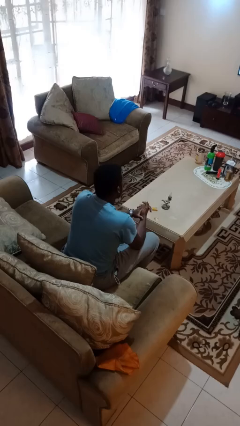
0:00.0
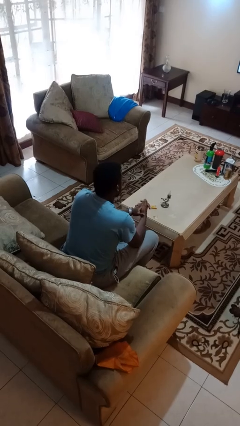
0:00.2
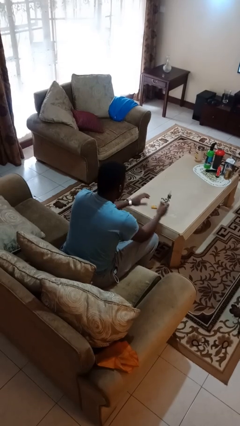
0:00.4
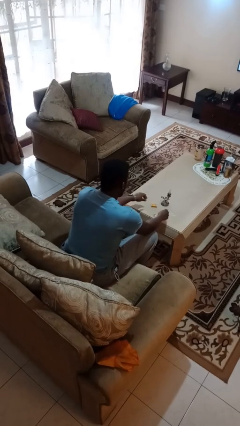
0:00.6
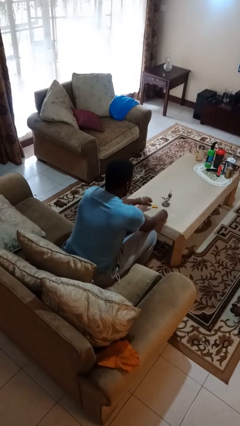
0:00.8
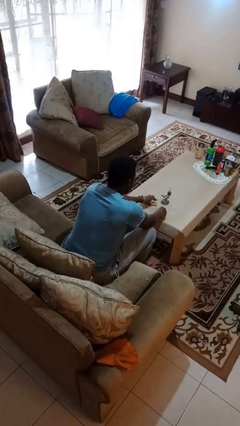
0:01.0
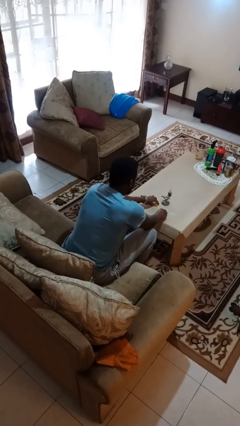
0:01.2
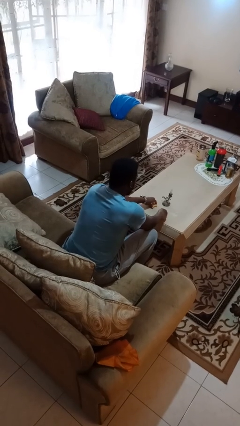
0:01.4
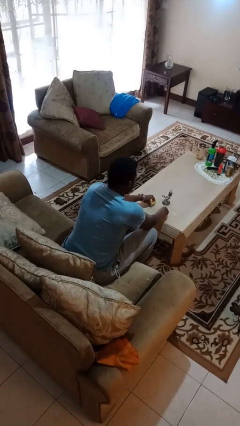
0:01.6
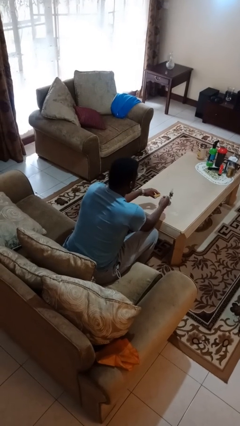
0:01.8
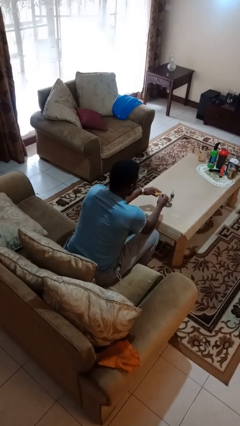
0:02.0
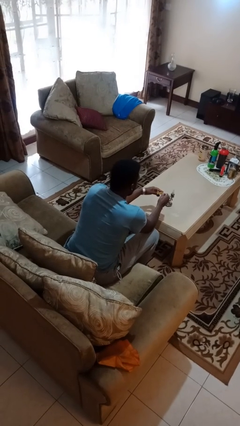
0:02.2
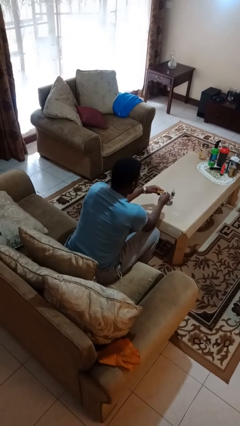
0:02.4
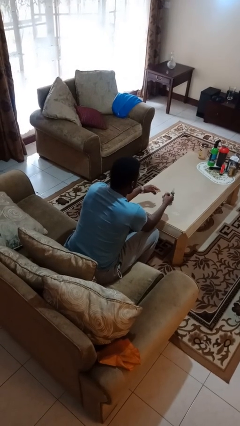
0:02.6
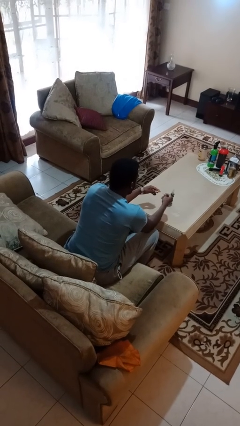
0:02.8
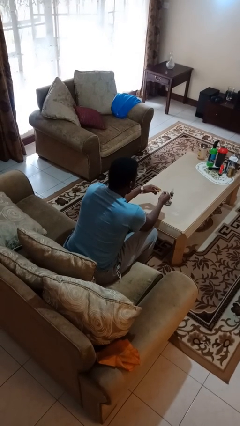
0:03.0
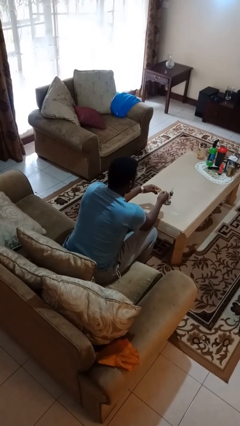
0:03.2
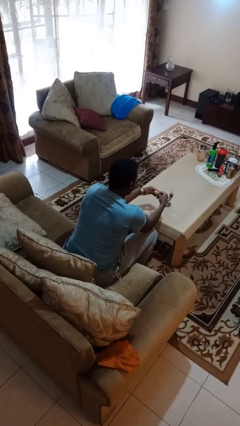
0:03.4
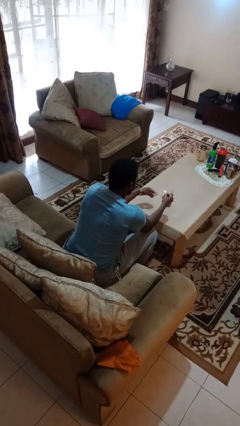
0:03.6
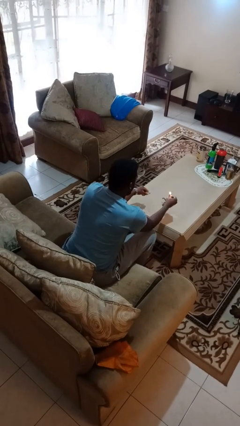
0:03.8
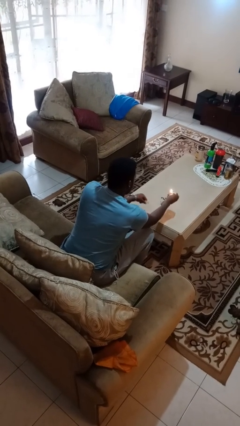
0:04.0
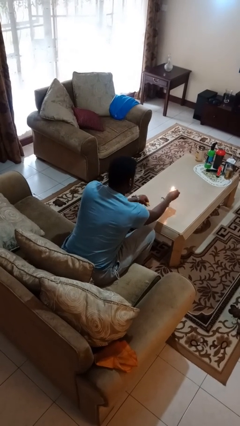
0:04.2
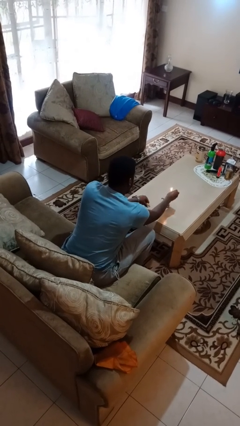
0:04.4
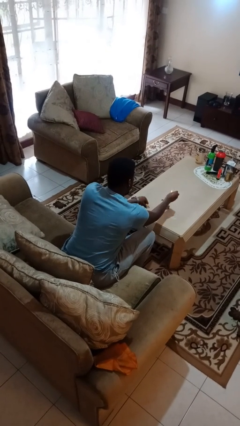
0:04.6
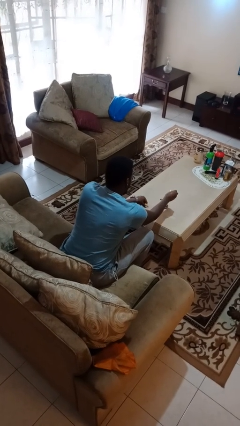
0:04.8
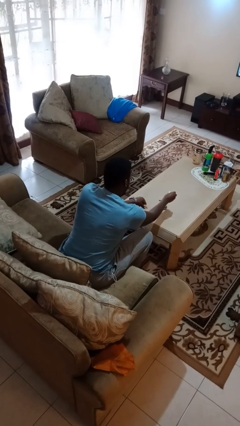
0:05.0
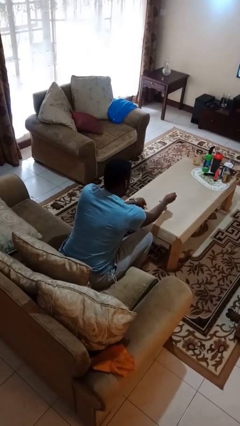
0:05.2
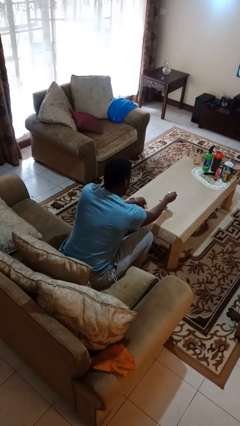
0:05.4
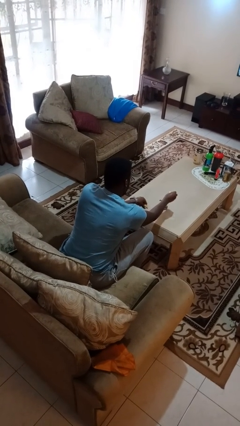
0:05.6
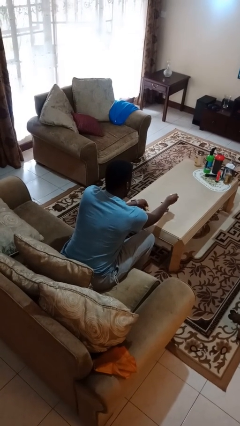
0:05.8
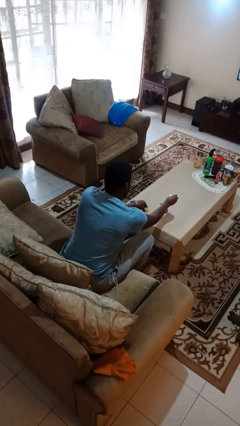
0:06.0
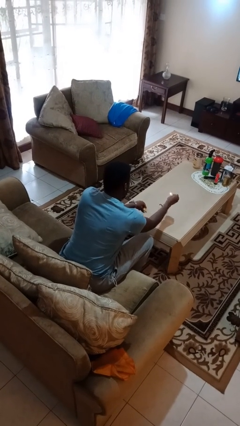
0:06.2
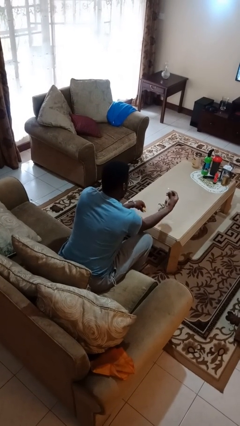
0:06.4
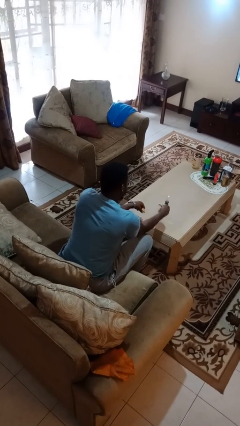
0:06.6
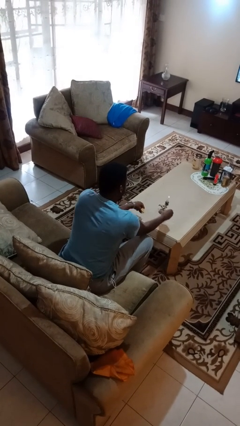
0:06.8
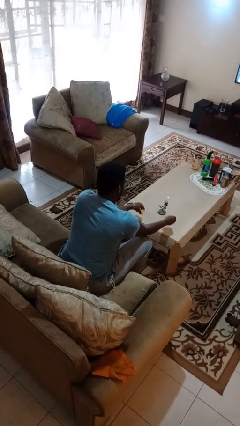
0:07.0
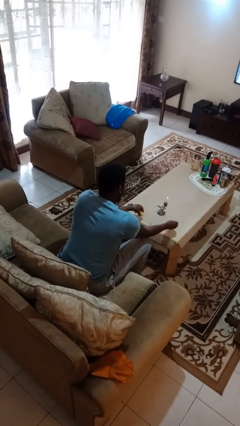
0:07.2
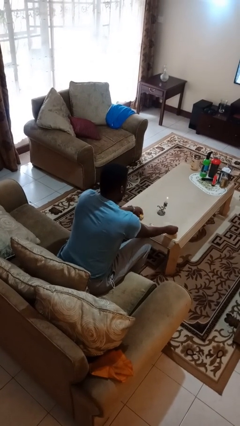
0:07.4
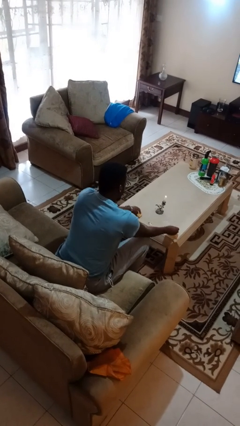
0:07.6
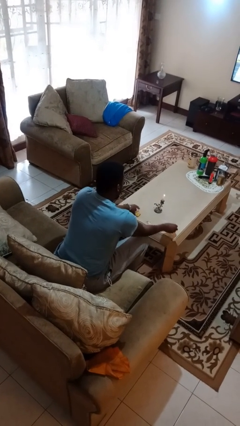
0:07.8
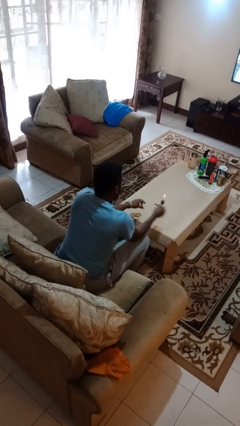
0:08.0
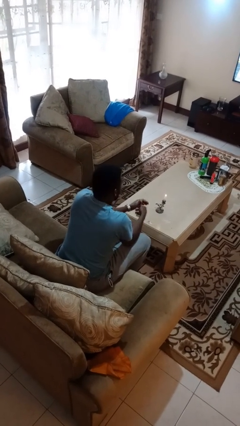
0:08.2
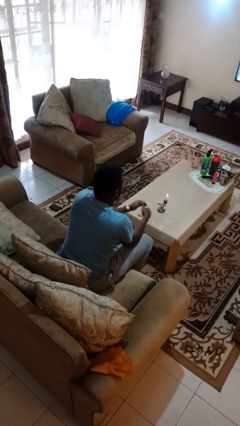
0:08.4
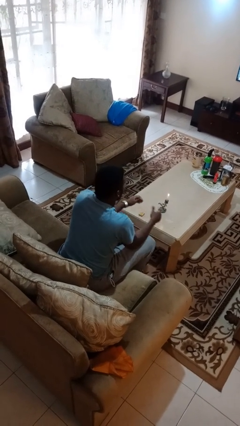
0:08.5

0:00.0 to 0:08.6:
person lights candle

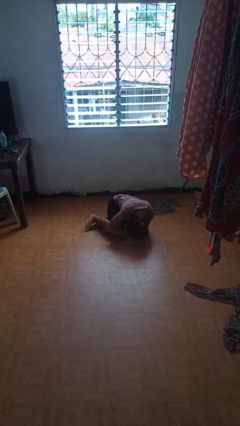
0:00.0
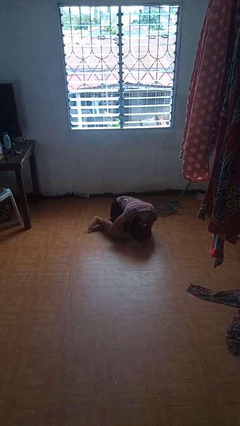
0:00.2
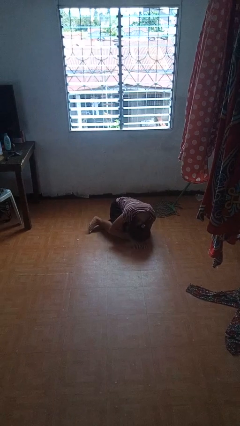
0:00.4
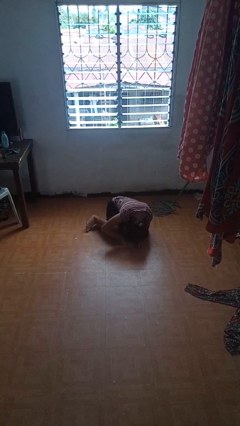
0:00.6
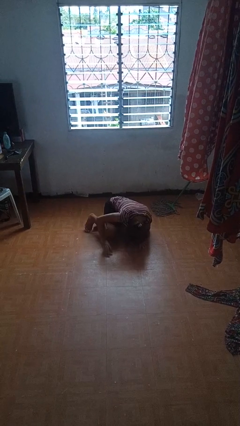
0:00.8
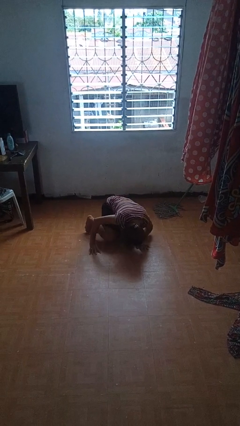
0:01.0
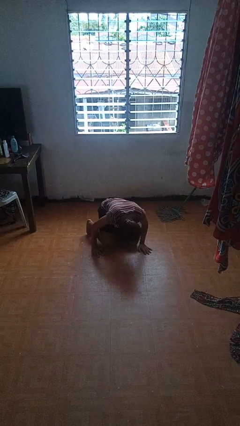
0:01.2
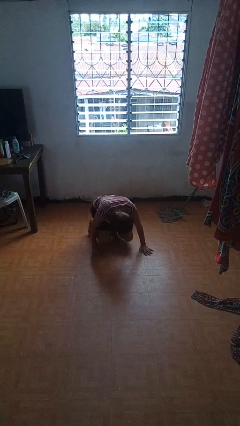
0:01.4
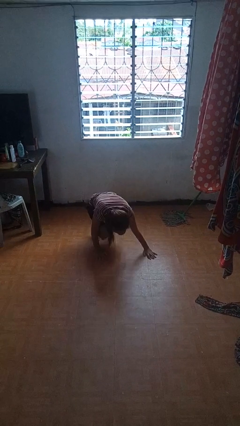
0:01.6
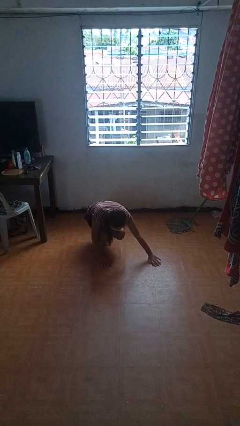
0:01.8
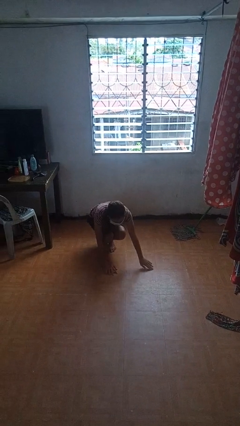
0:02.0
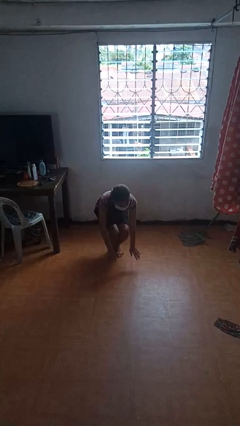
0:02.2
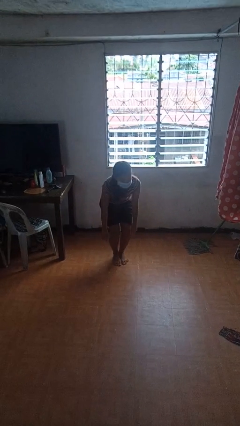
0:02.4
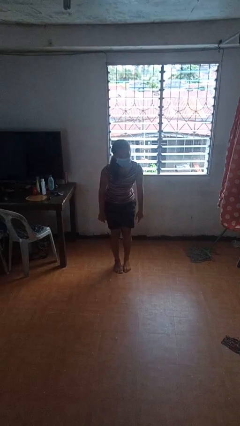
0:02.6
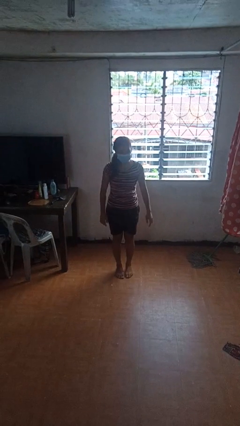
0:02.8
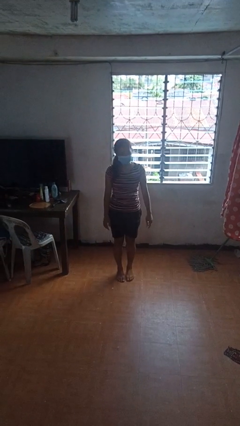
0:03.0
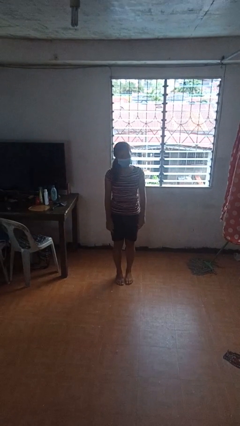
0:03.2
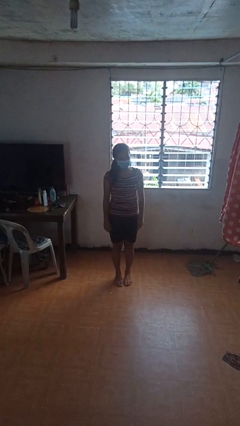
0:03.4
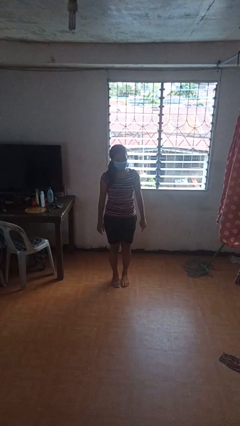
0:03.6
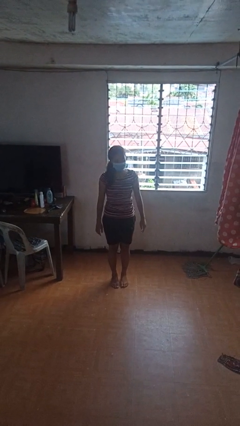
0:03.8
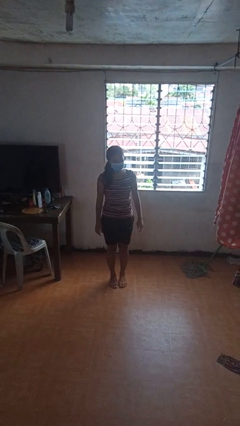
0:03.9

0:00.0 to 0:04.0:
person stands up from floor

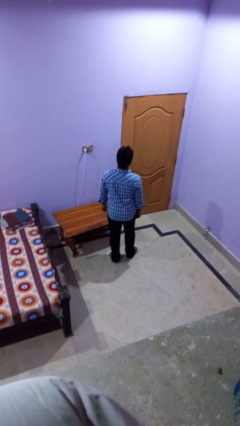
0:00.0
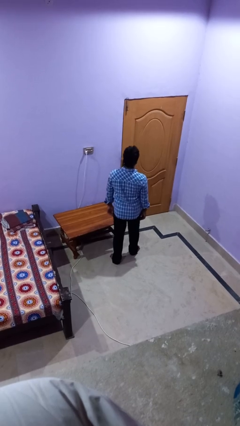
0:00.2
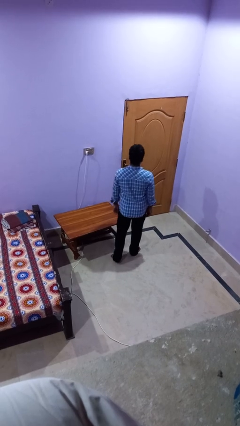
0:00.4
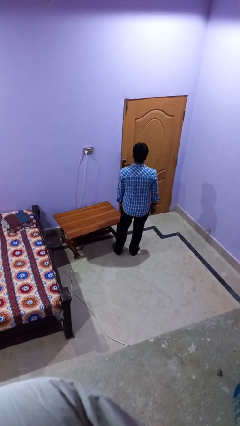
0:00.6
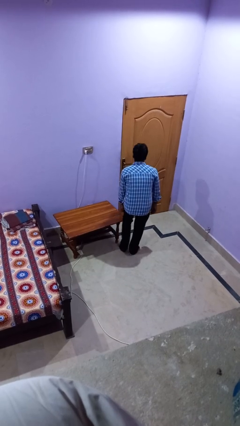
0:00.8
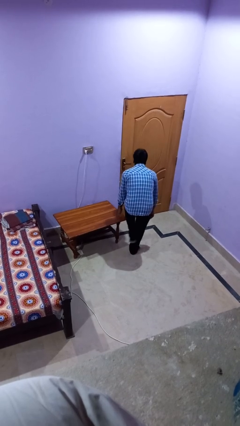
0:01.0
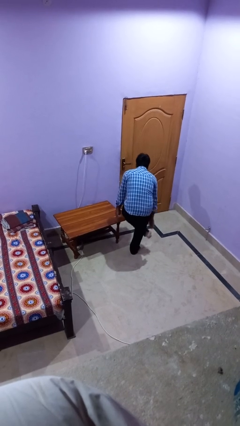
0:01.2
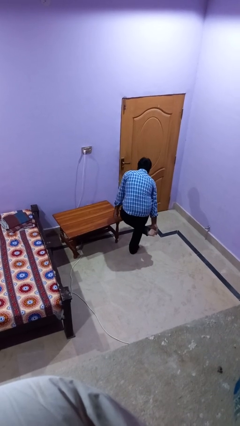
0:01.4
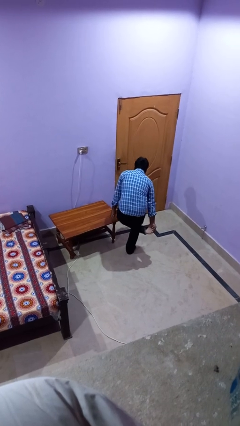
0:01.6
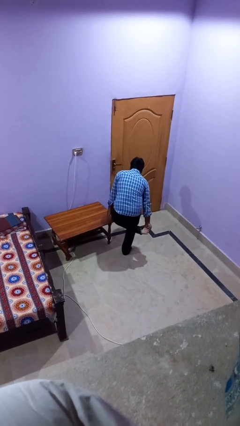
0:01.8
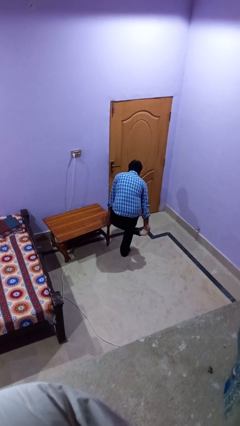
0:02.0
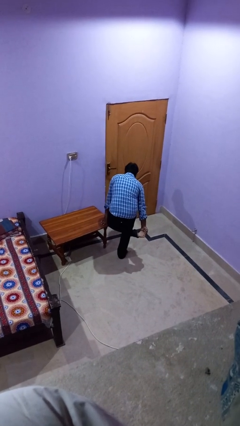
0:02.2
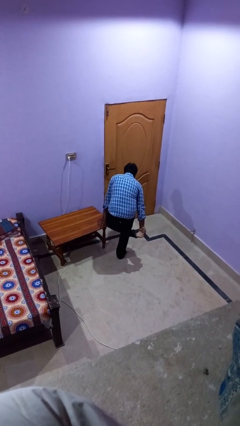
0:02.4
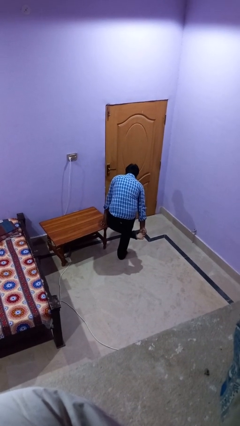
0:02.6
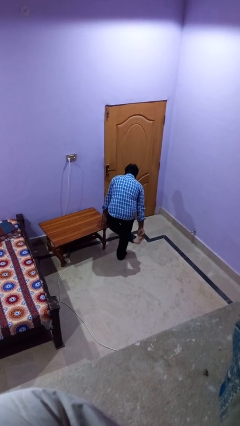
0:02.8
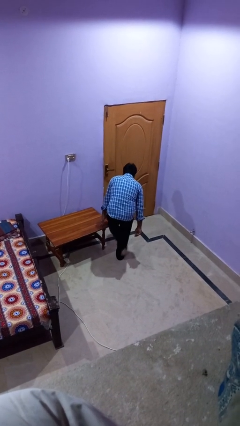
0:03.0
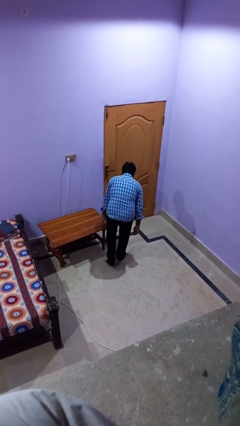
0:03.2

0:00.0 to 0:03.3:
person stubs toe

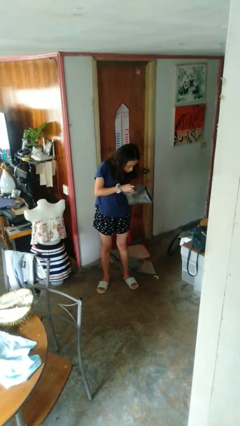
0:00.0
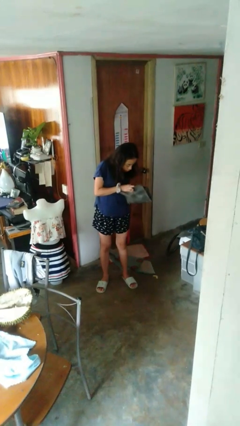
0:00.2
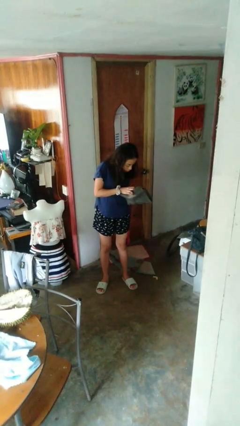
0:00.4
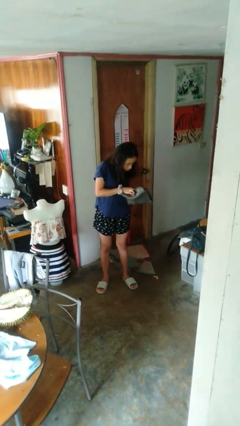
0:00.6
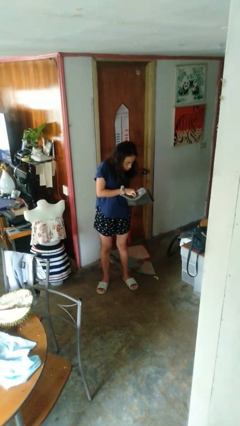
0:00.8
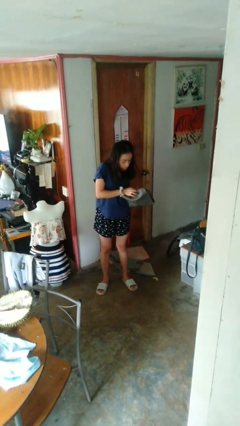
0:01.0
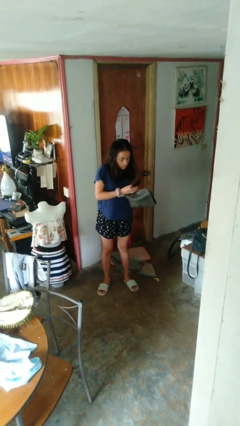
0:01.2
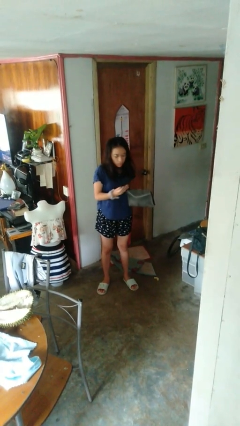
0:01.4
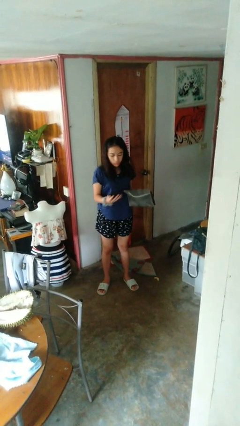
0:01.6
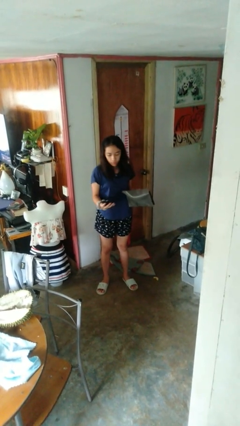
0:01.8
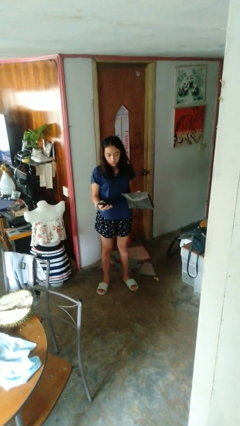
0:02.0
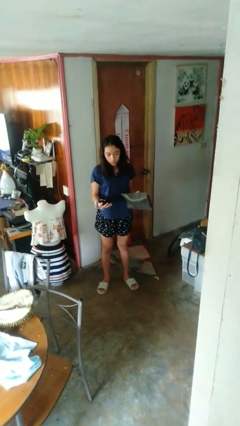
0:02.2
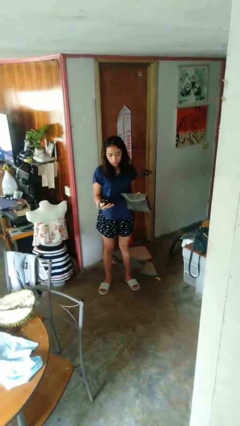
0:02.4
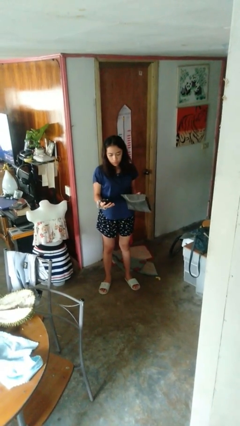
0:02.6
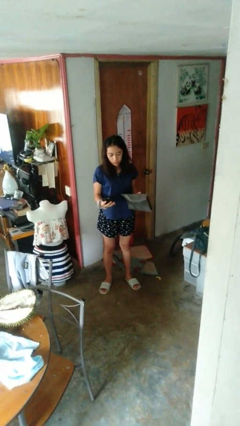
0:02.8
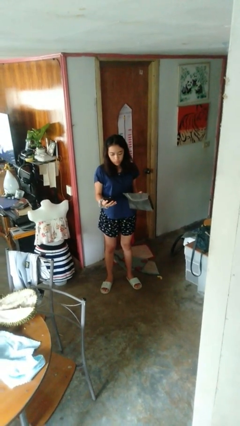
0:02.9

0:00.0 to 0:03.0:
person takes object from purse
